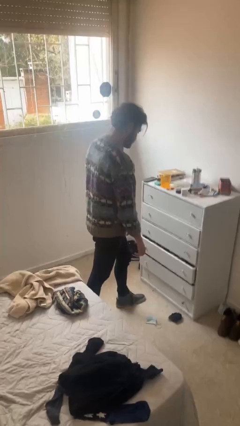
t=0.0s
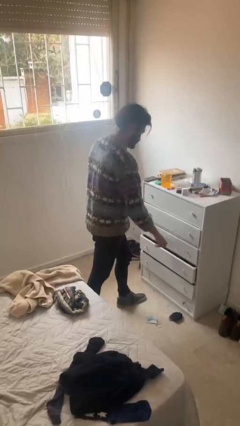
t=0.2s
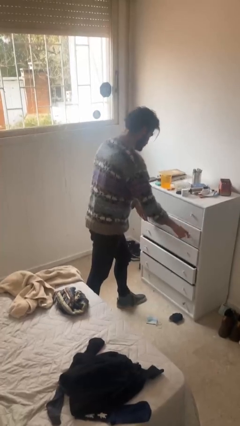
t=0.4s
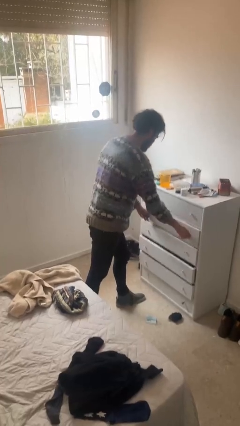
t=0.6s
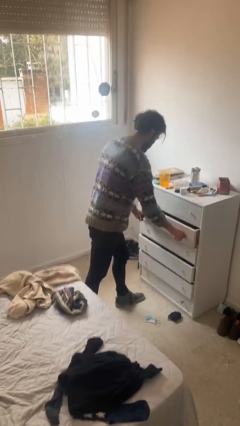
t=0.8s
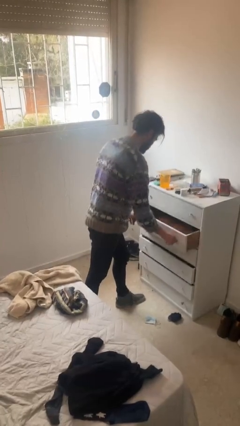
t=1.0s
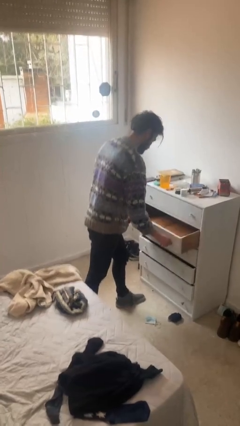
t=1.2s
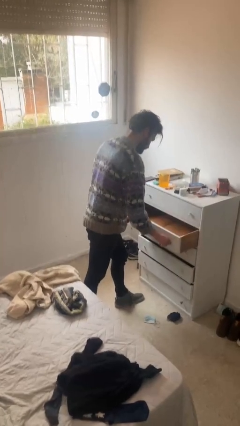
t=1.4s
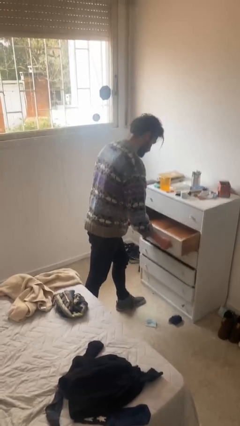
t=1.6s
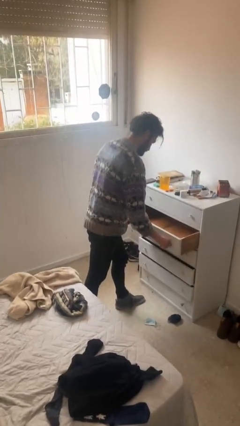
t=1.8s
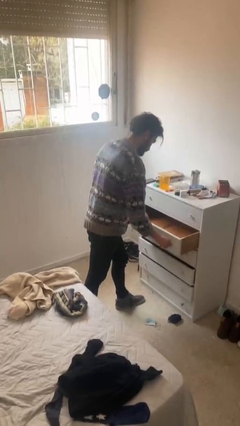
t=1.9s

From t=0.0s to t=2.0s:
person opens dresser drawer

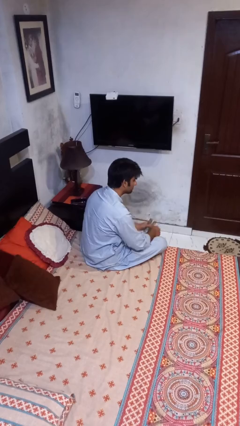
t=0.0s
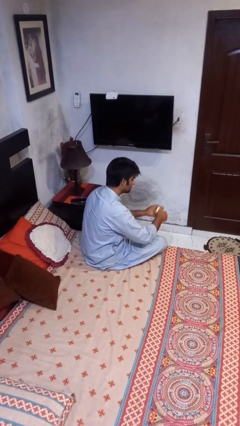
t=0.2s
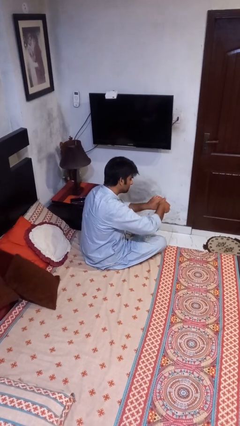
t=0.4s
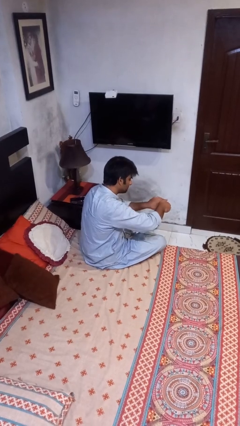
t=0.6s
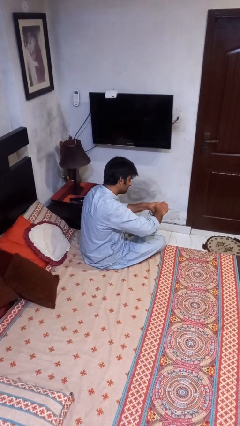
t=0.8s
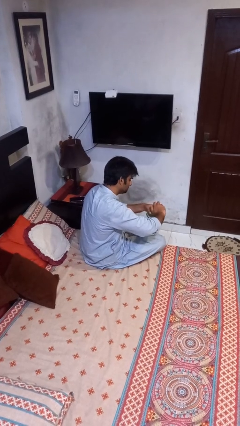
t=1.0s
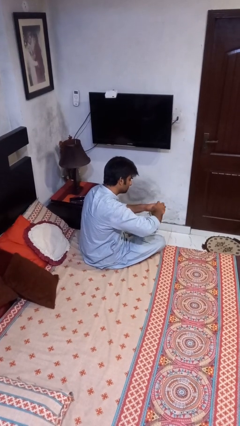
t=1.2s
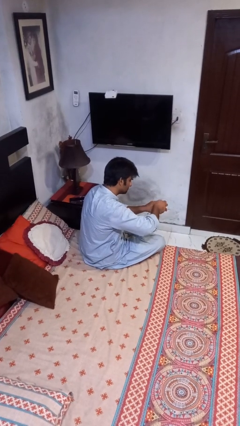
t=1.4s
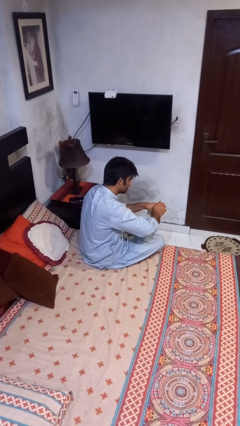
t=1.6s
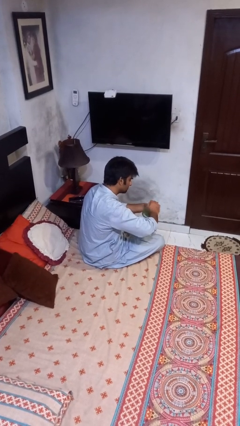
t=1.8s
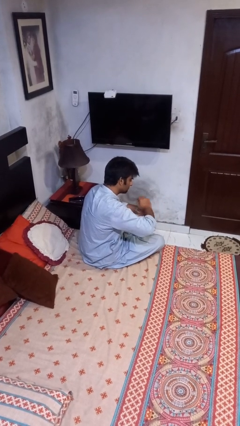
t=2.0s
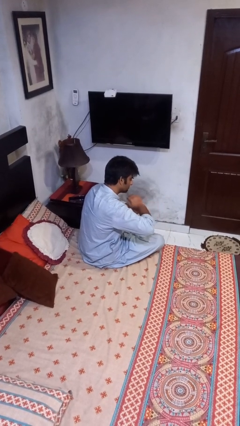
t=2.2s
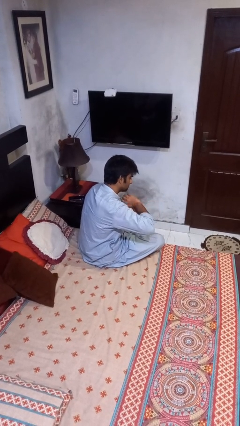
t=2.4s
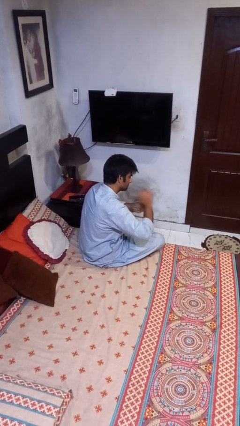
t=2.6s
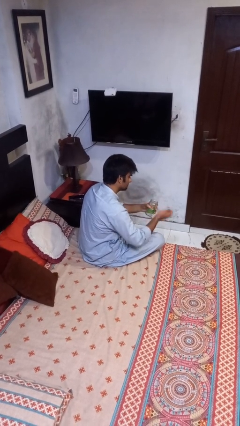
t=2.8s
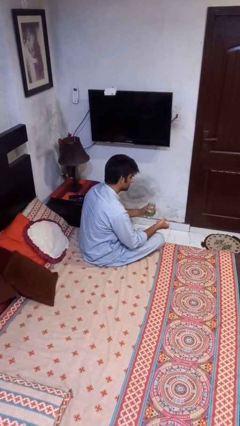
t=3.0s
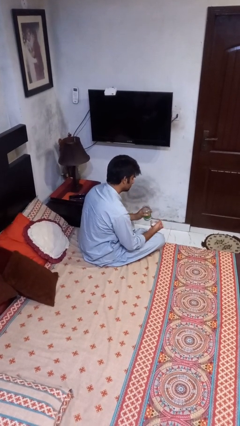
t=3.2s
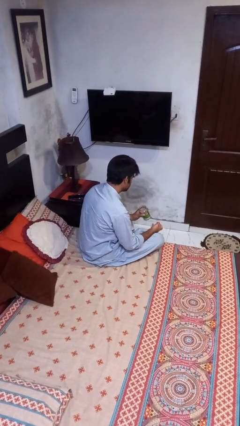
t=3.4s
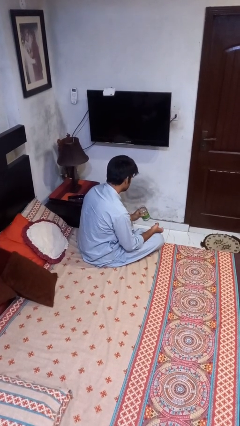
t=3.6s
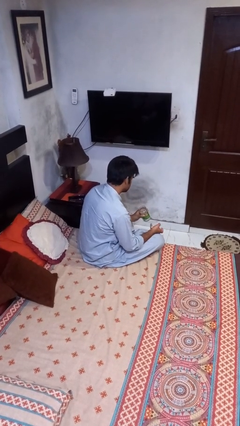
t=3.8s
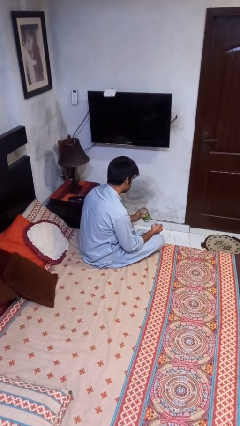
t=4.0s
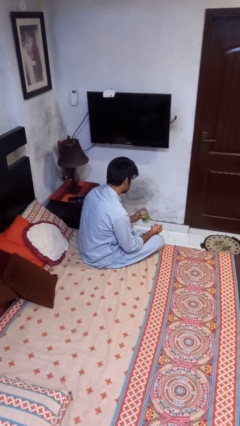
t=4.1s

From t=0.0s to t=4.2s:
person opens jar

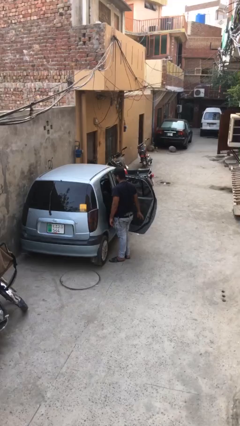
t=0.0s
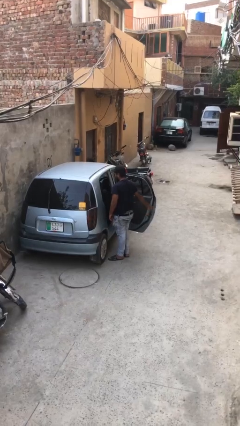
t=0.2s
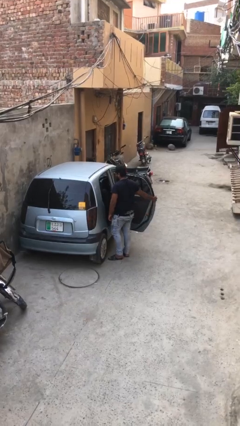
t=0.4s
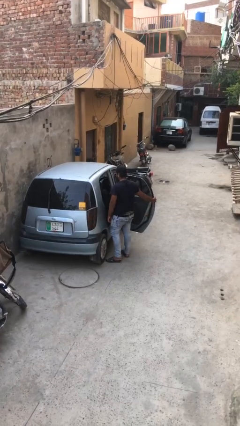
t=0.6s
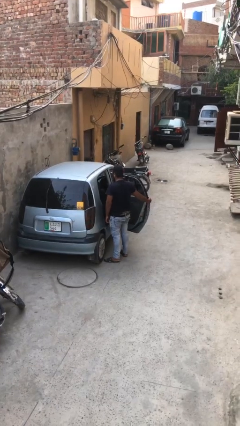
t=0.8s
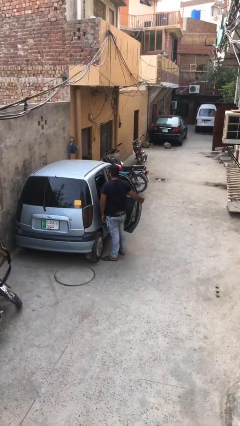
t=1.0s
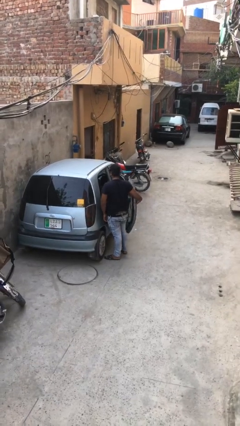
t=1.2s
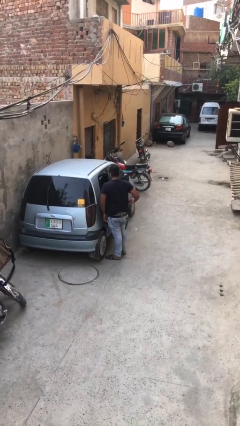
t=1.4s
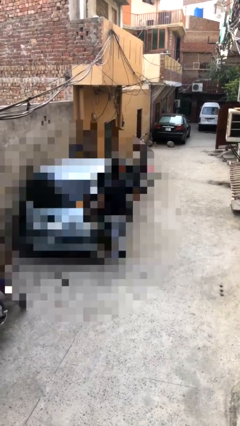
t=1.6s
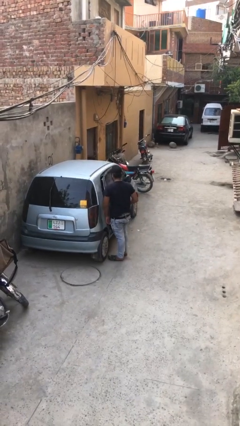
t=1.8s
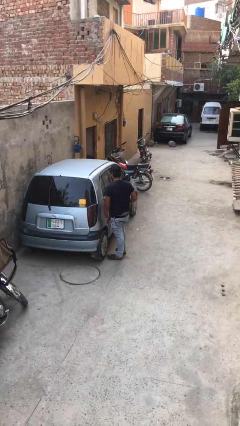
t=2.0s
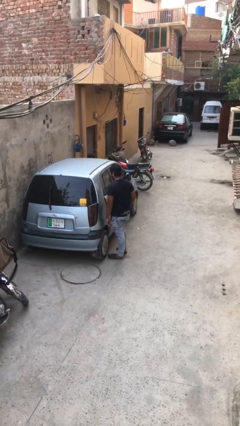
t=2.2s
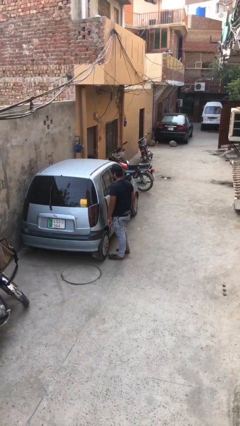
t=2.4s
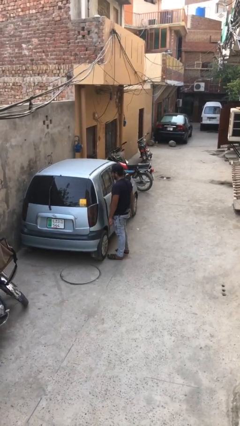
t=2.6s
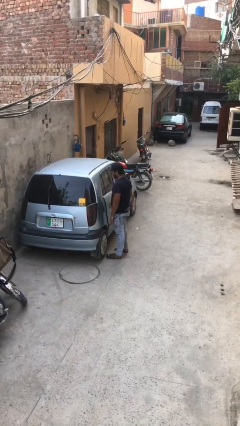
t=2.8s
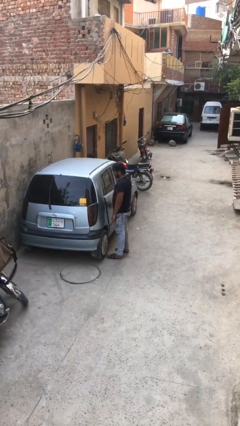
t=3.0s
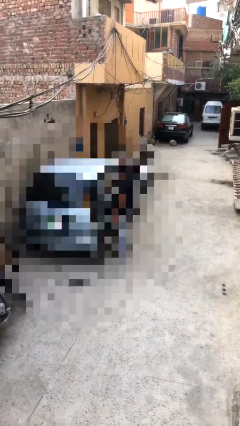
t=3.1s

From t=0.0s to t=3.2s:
person closes car door

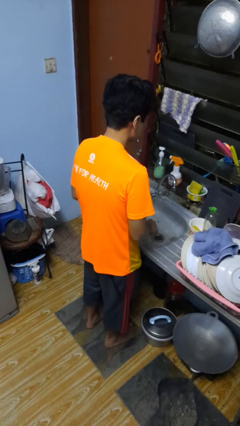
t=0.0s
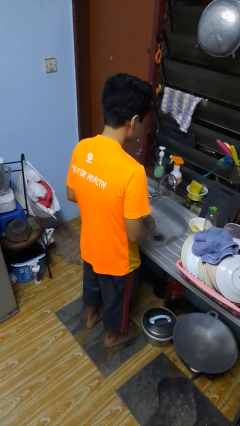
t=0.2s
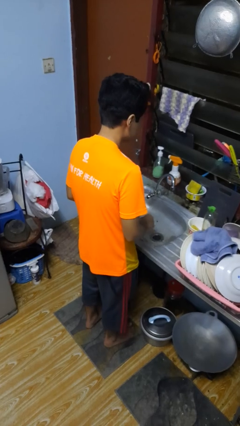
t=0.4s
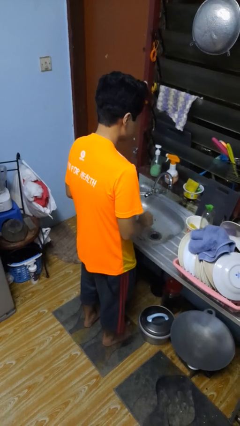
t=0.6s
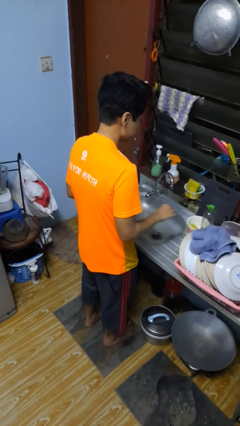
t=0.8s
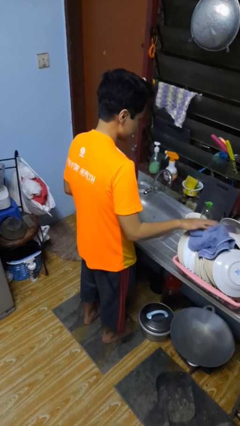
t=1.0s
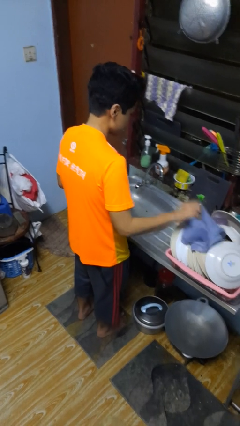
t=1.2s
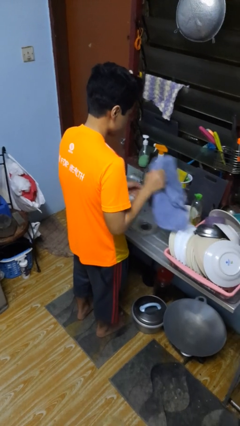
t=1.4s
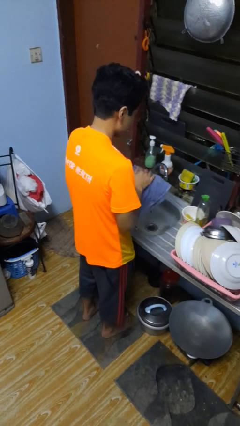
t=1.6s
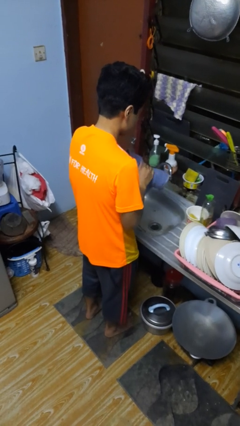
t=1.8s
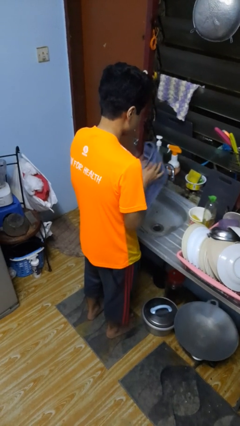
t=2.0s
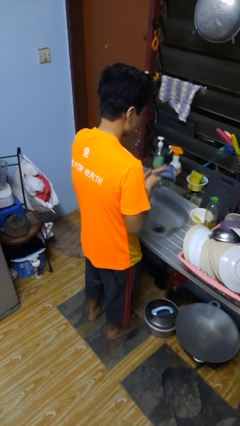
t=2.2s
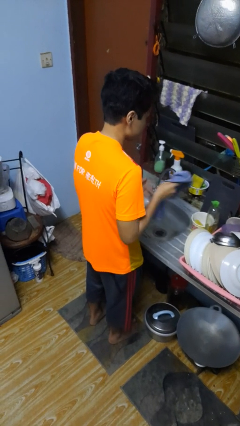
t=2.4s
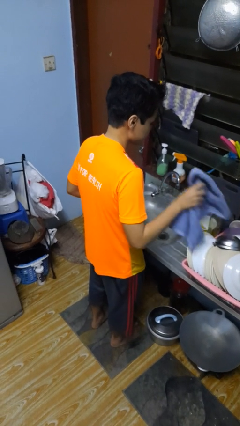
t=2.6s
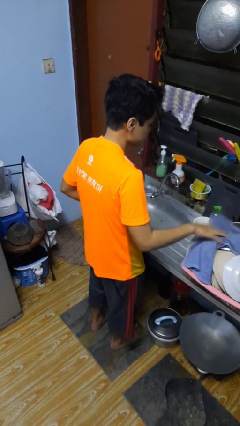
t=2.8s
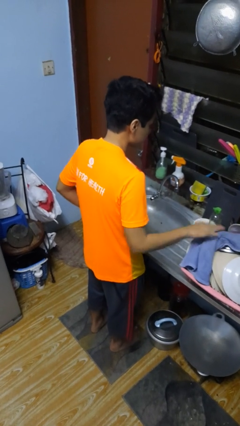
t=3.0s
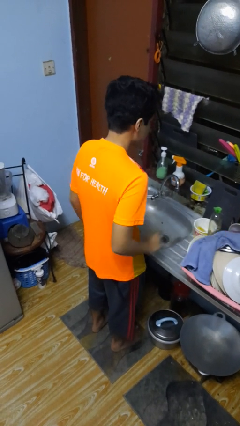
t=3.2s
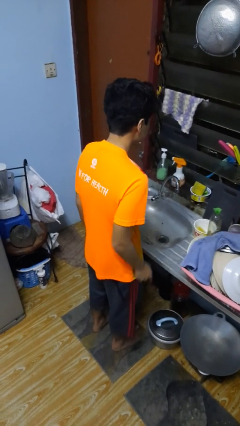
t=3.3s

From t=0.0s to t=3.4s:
person dries hands with towel

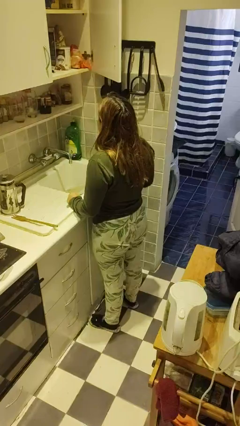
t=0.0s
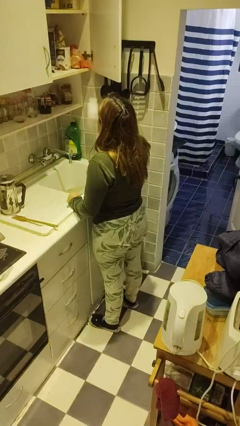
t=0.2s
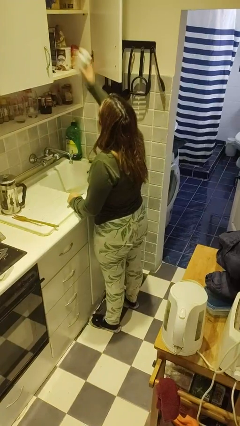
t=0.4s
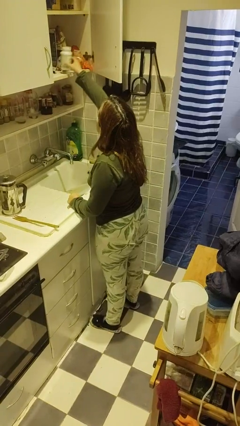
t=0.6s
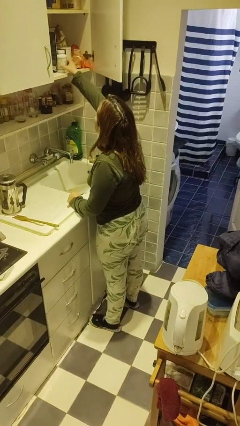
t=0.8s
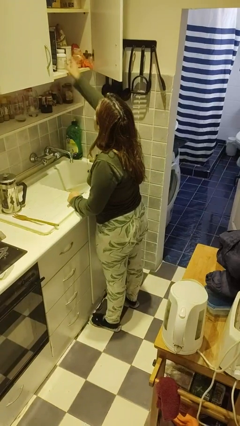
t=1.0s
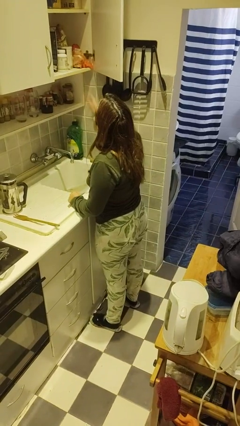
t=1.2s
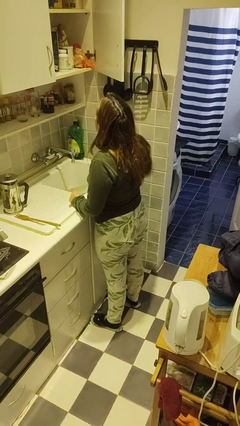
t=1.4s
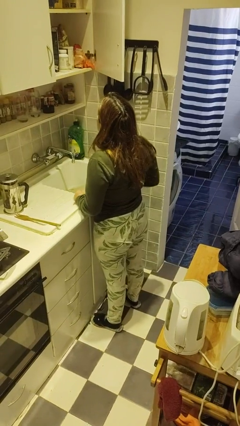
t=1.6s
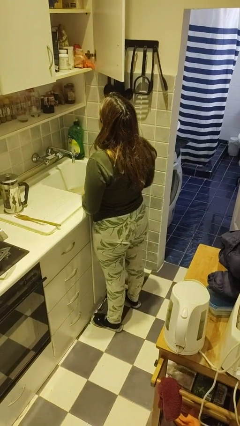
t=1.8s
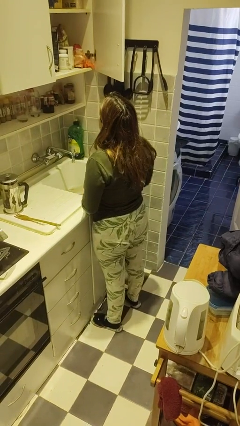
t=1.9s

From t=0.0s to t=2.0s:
person puts object in cabinet

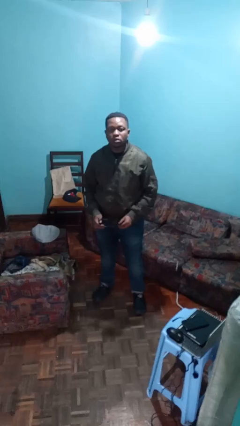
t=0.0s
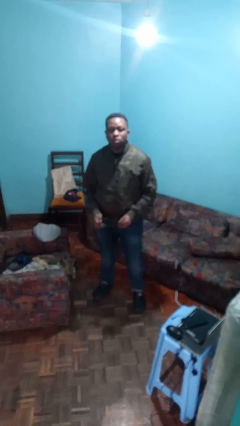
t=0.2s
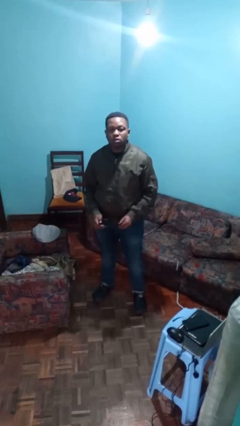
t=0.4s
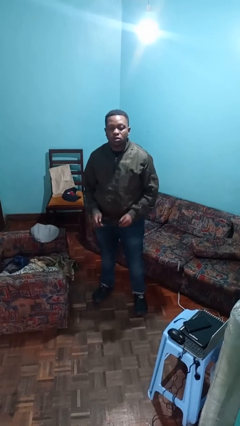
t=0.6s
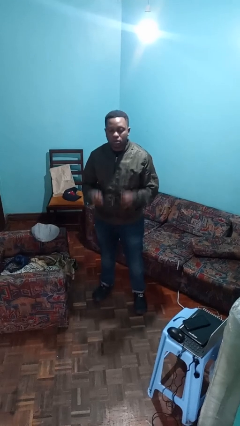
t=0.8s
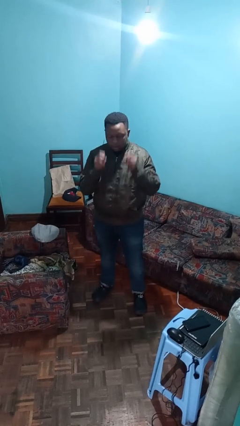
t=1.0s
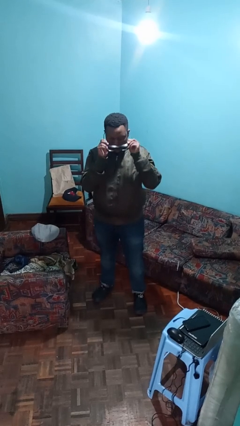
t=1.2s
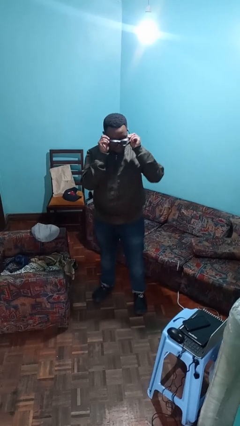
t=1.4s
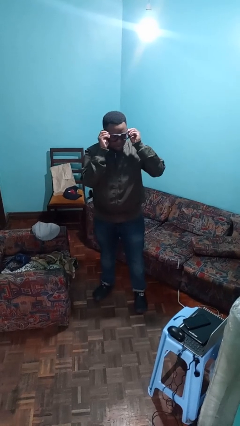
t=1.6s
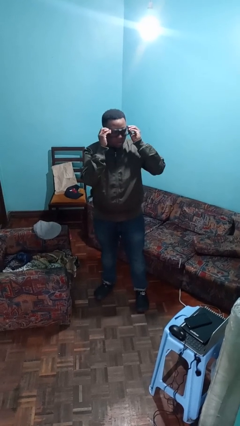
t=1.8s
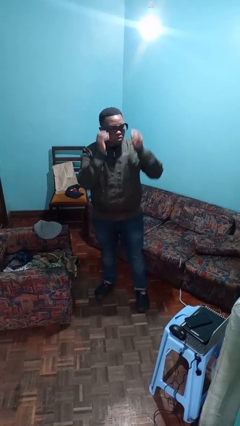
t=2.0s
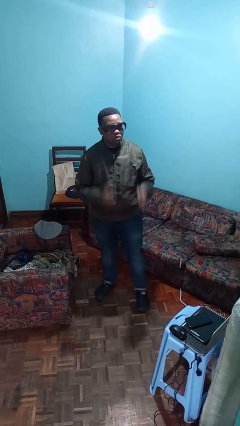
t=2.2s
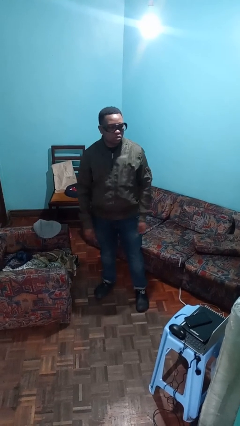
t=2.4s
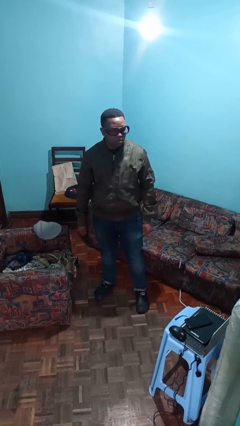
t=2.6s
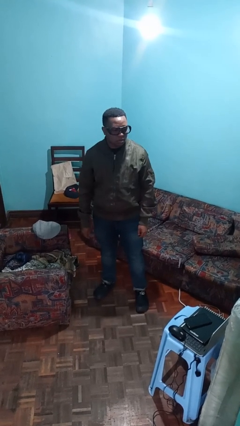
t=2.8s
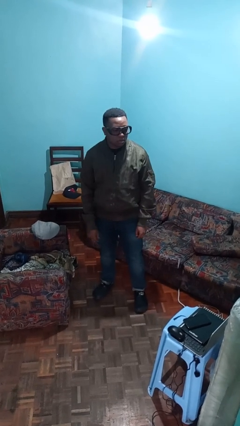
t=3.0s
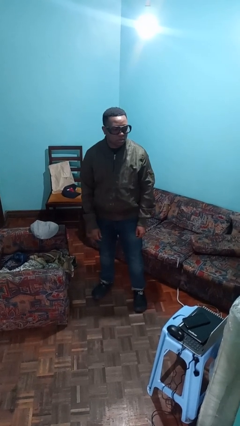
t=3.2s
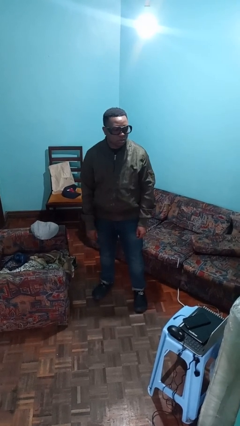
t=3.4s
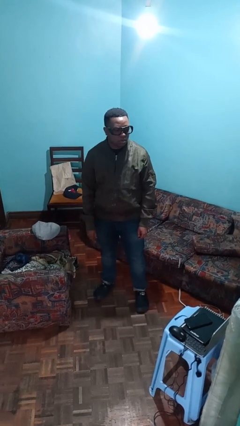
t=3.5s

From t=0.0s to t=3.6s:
person puts on glasses
